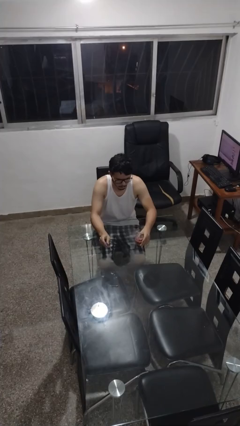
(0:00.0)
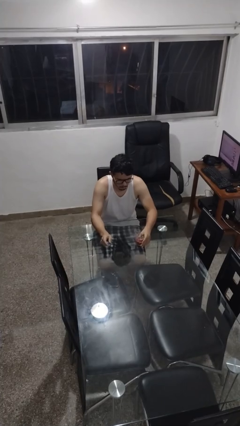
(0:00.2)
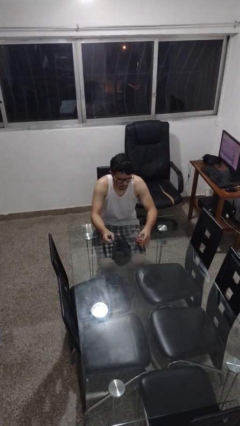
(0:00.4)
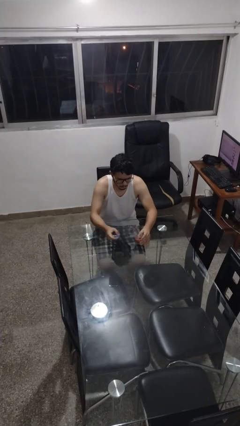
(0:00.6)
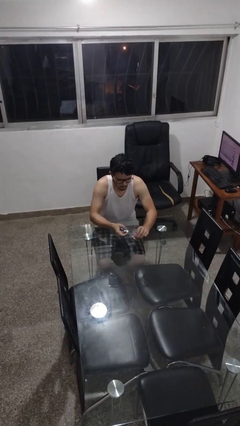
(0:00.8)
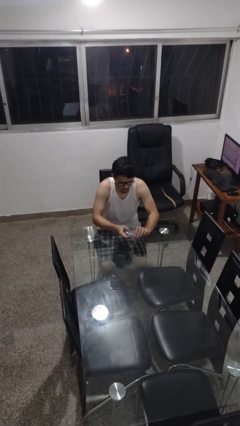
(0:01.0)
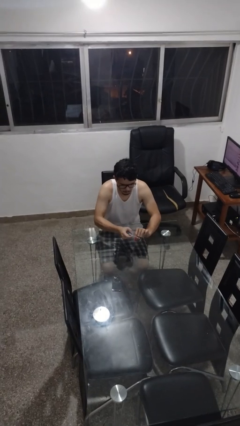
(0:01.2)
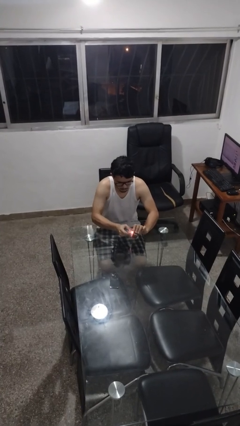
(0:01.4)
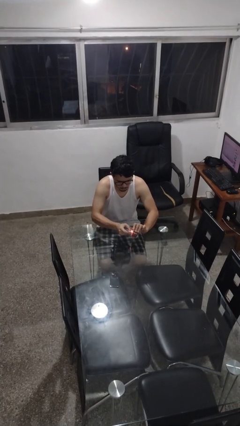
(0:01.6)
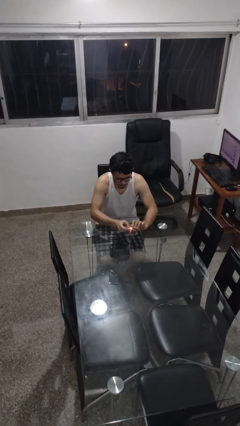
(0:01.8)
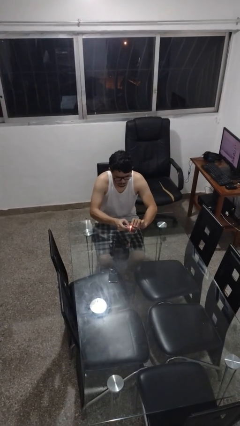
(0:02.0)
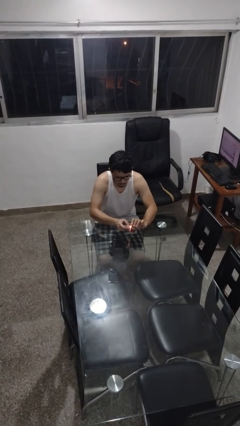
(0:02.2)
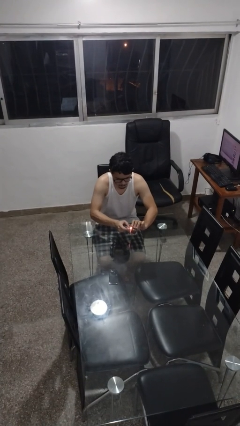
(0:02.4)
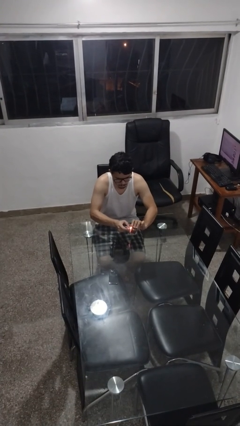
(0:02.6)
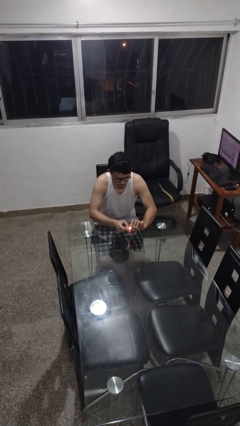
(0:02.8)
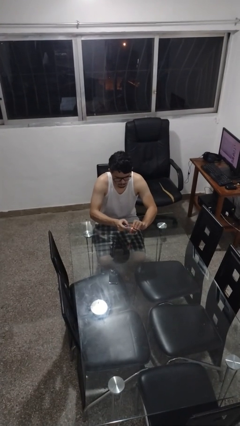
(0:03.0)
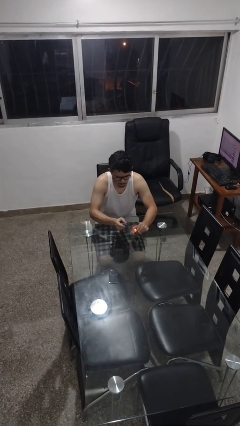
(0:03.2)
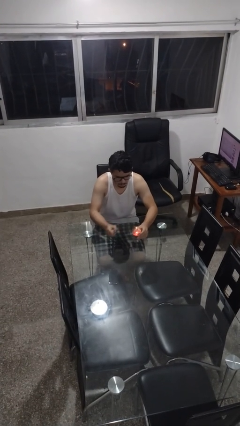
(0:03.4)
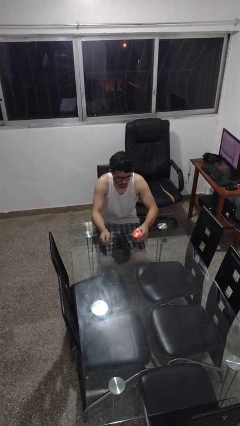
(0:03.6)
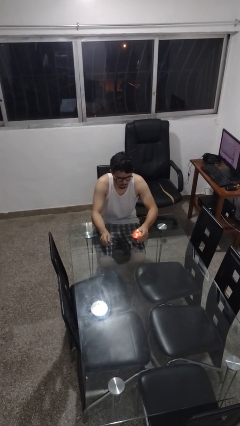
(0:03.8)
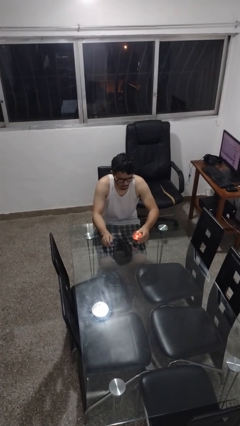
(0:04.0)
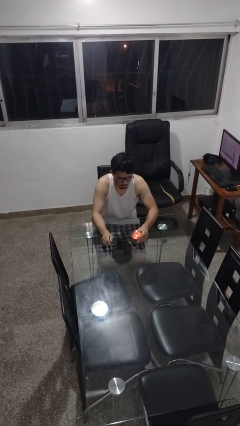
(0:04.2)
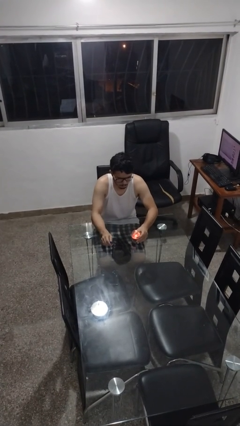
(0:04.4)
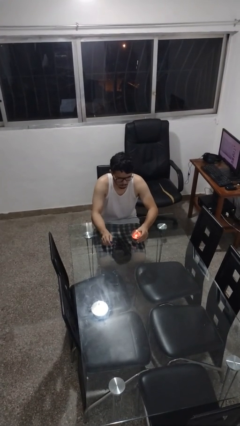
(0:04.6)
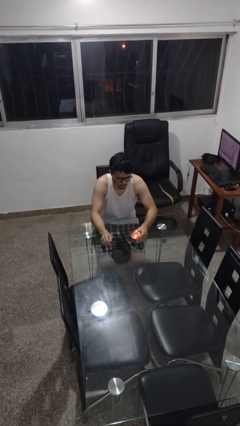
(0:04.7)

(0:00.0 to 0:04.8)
person lights candle

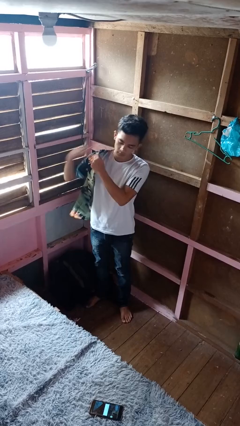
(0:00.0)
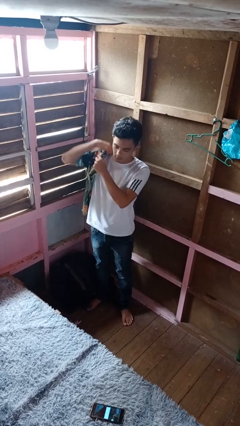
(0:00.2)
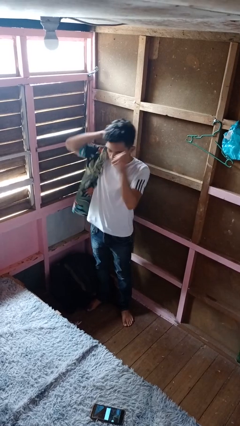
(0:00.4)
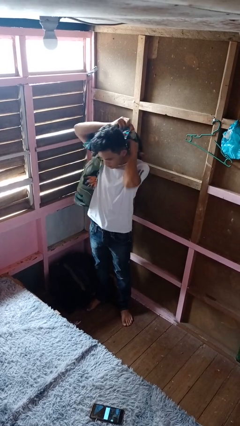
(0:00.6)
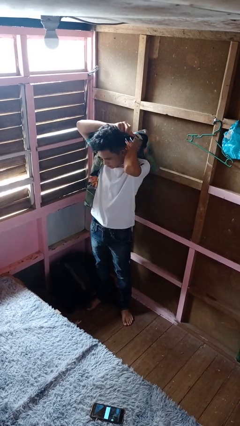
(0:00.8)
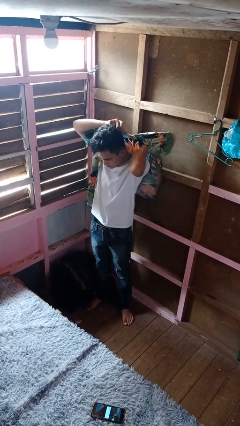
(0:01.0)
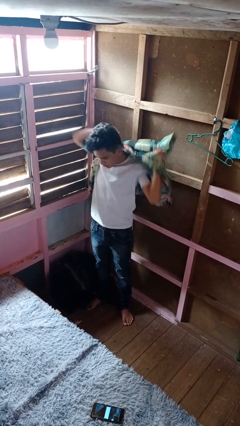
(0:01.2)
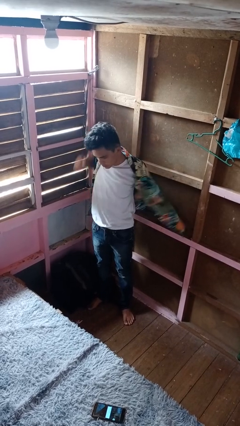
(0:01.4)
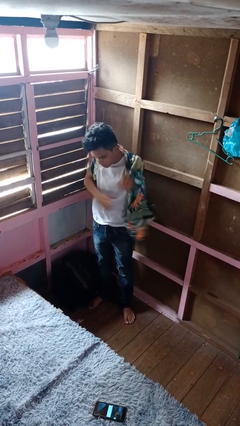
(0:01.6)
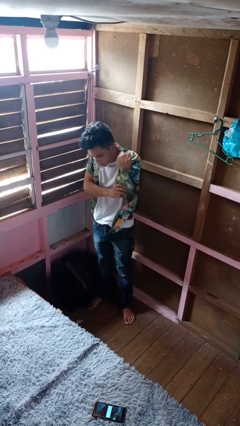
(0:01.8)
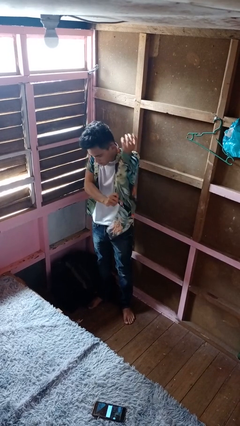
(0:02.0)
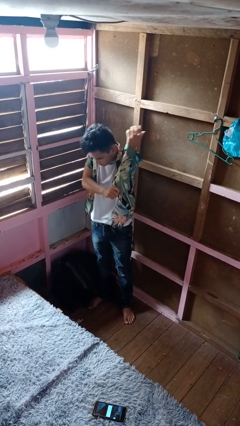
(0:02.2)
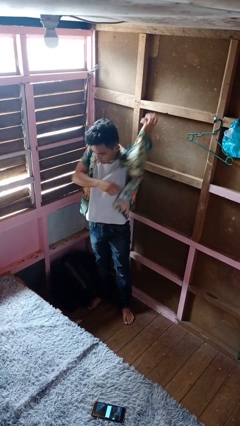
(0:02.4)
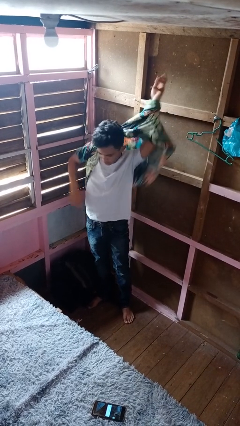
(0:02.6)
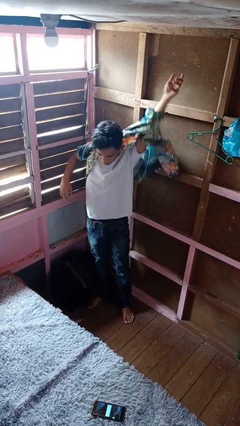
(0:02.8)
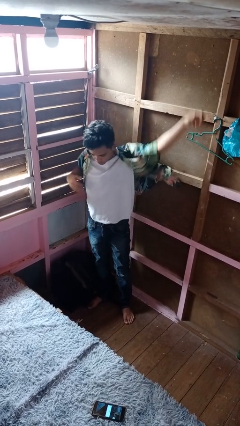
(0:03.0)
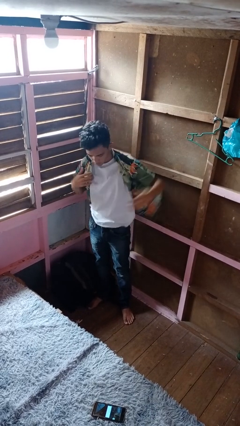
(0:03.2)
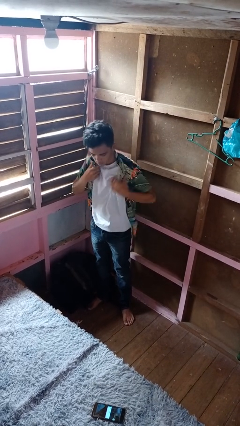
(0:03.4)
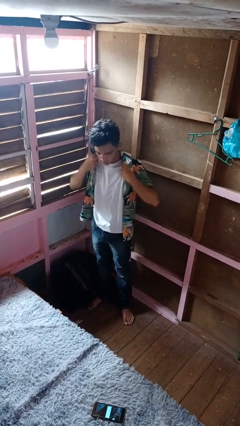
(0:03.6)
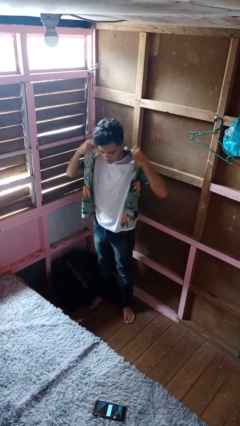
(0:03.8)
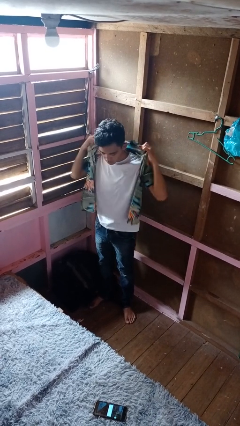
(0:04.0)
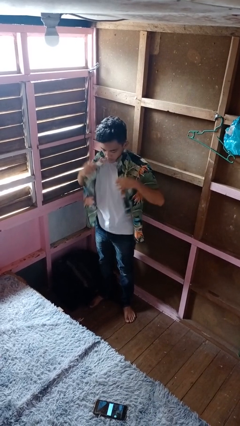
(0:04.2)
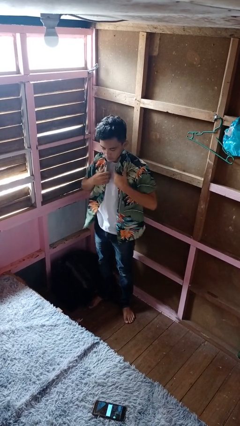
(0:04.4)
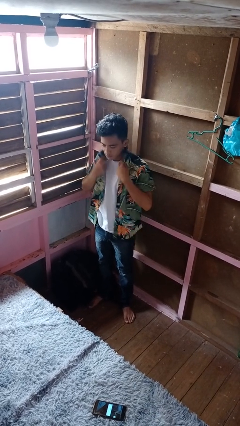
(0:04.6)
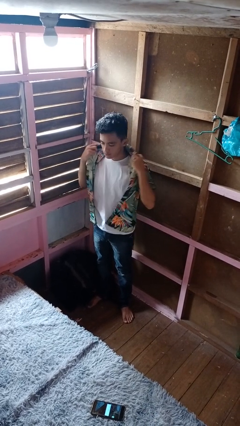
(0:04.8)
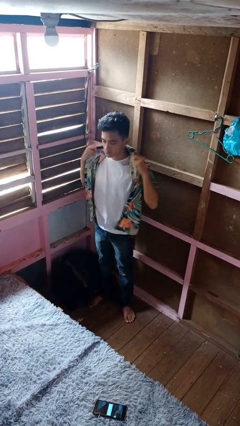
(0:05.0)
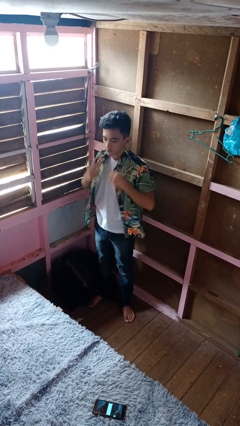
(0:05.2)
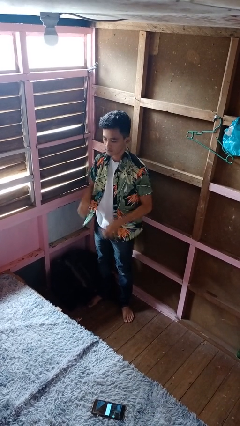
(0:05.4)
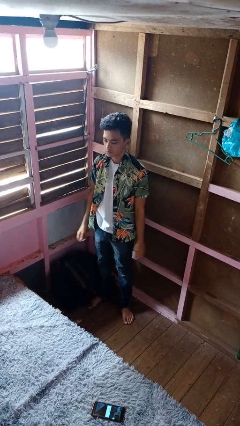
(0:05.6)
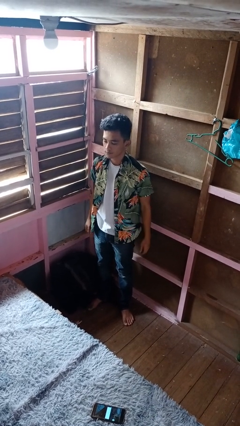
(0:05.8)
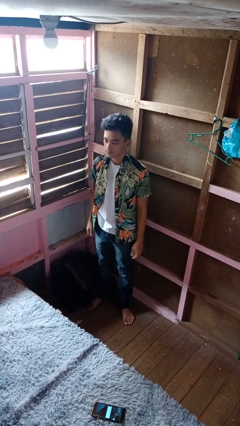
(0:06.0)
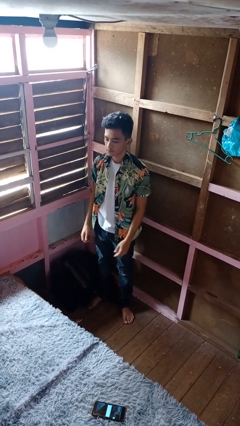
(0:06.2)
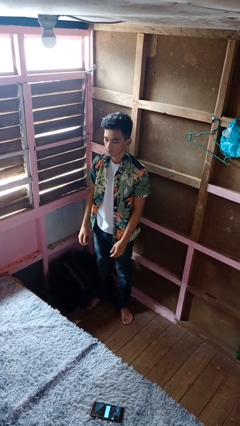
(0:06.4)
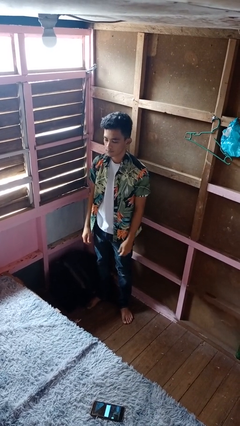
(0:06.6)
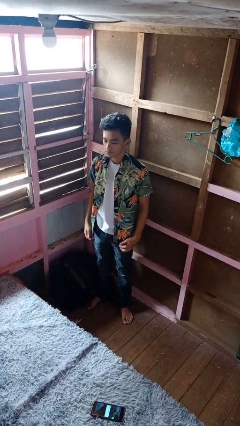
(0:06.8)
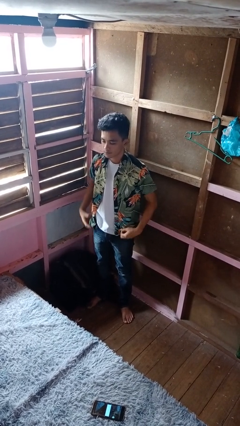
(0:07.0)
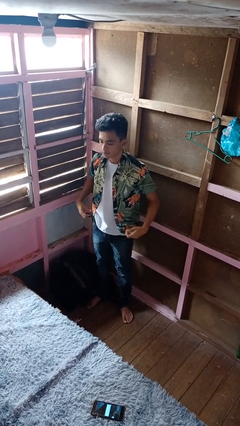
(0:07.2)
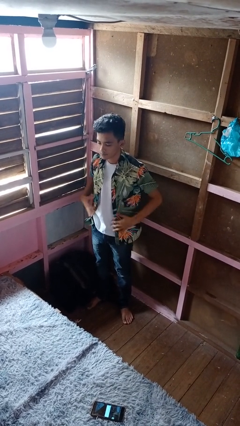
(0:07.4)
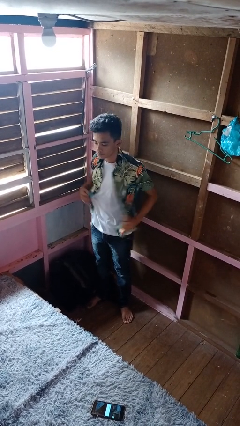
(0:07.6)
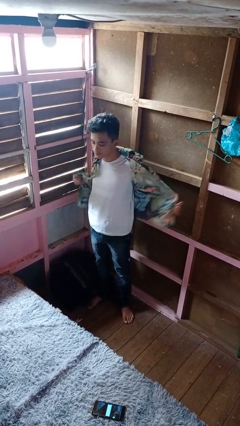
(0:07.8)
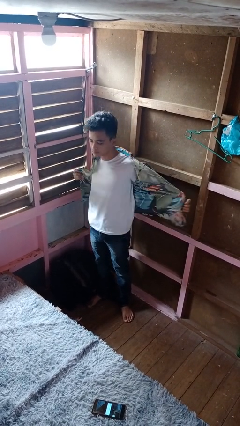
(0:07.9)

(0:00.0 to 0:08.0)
person puts on shirt

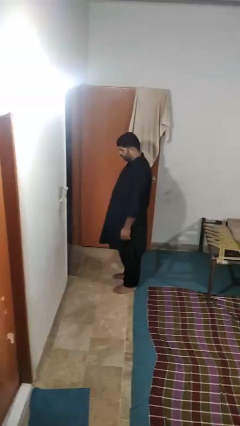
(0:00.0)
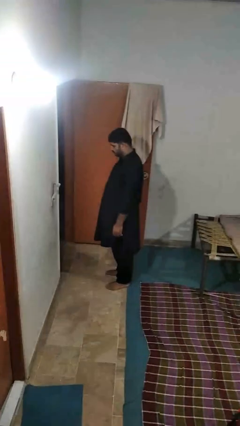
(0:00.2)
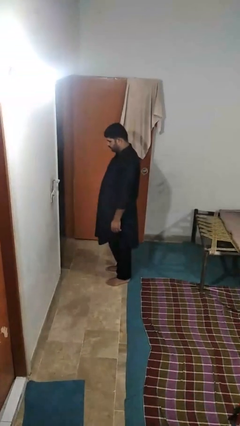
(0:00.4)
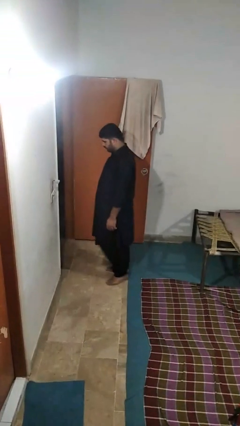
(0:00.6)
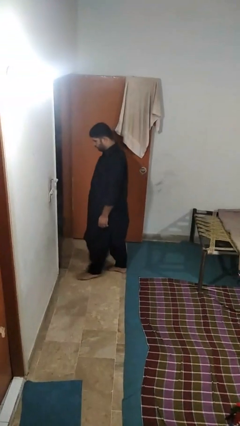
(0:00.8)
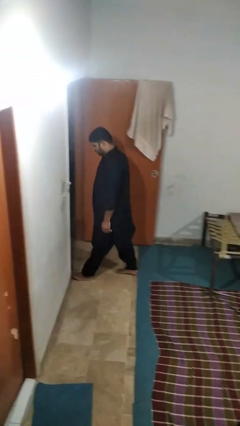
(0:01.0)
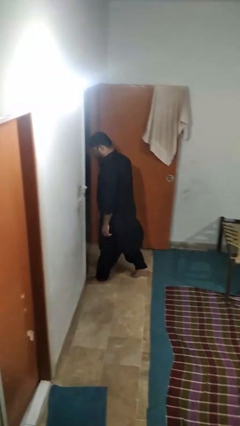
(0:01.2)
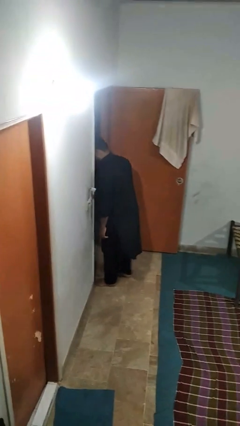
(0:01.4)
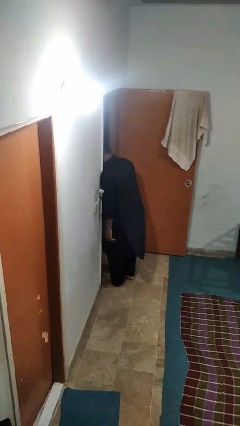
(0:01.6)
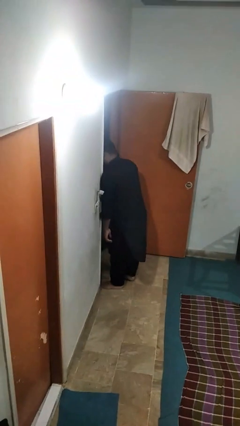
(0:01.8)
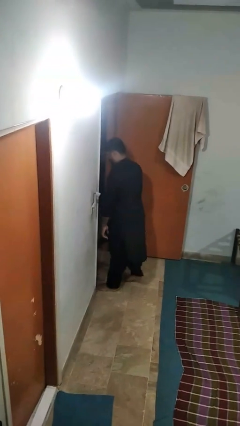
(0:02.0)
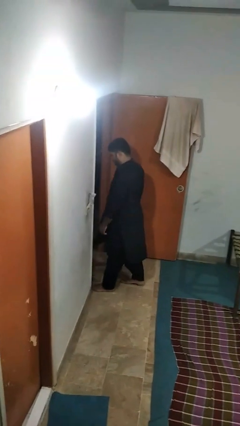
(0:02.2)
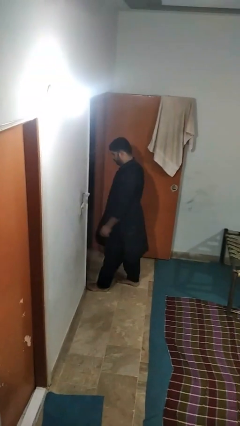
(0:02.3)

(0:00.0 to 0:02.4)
person bumps into wall

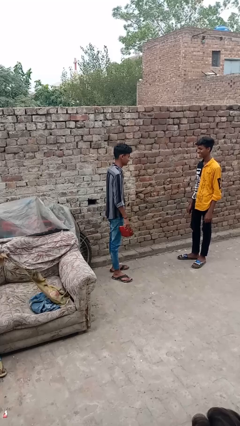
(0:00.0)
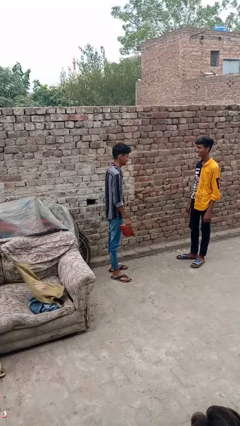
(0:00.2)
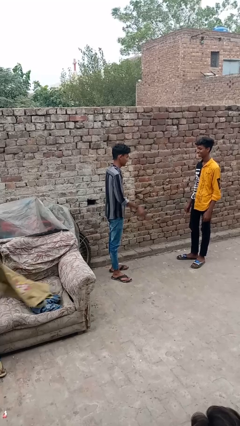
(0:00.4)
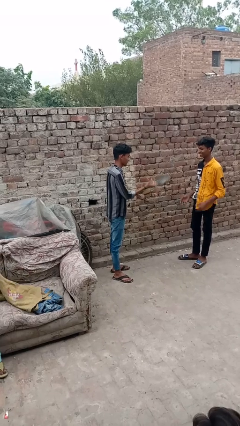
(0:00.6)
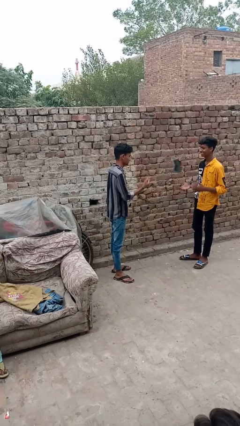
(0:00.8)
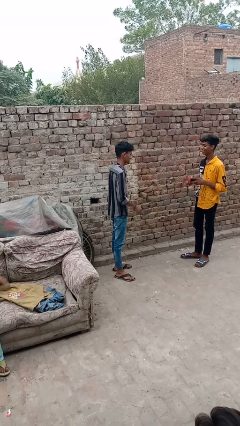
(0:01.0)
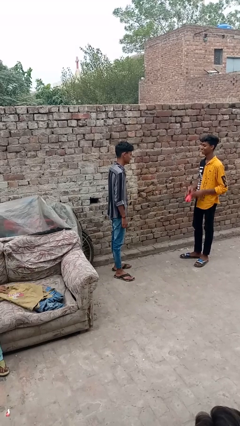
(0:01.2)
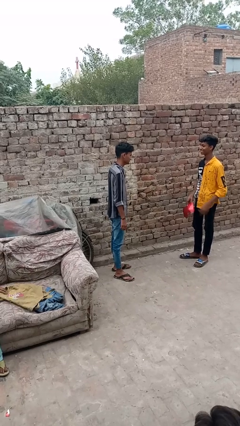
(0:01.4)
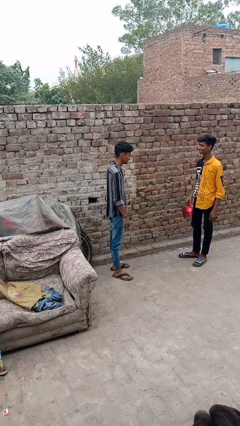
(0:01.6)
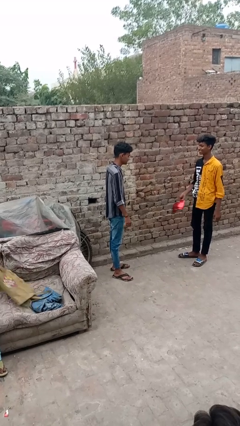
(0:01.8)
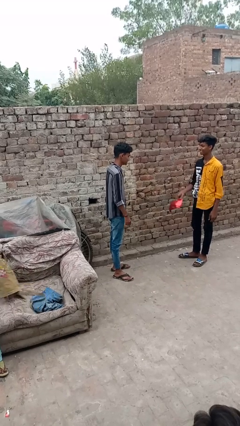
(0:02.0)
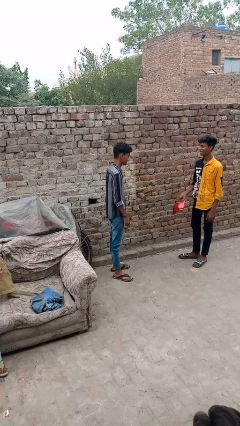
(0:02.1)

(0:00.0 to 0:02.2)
person throws object to person

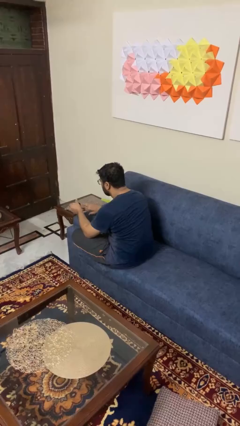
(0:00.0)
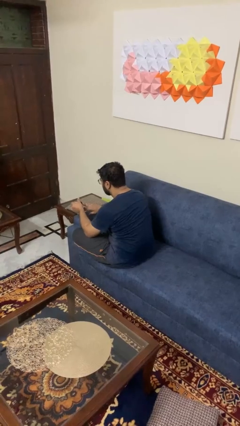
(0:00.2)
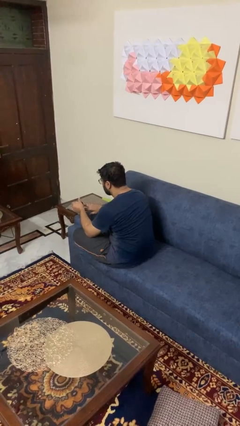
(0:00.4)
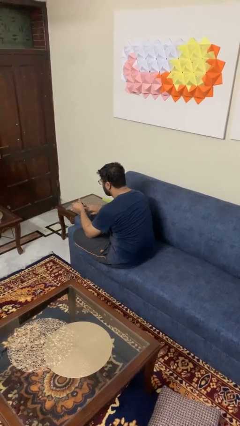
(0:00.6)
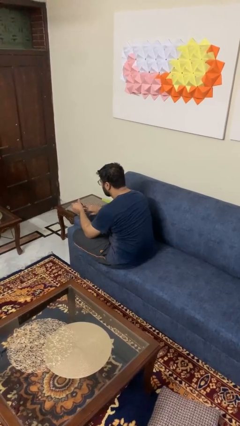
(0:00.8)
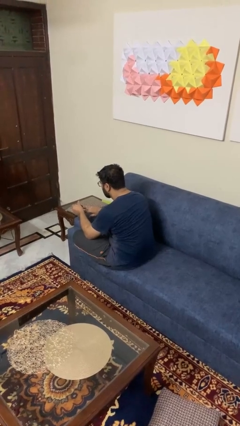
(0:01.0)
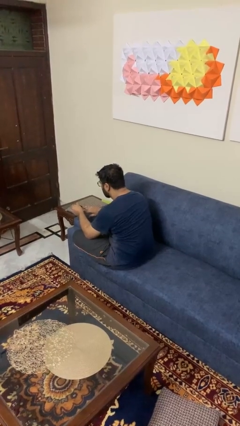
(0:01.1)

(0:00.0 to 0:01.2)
person clips fingernails
